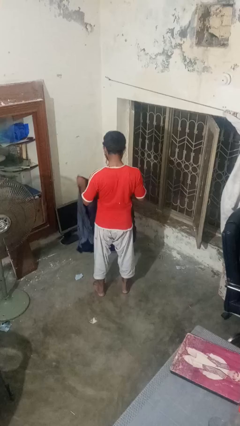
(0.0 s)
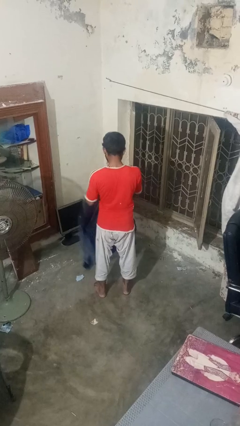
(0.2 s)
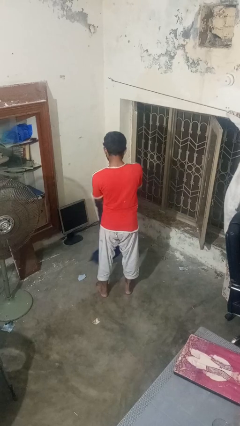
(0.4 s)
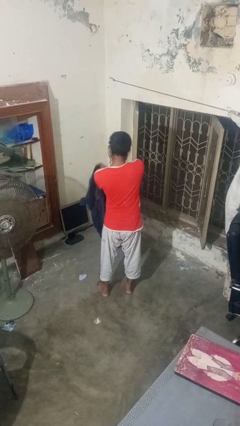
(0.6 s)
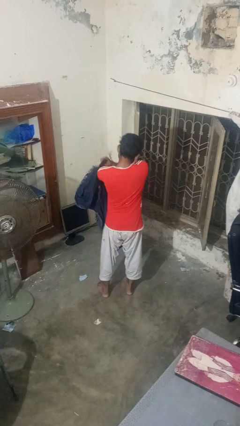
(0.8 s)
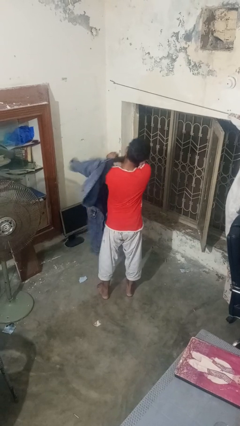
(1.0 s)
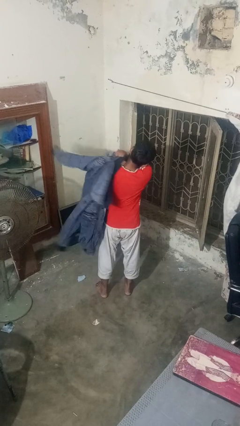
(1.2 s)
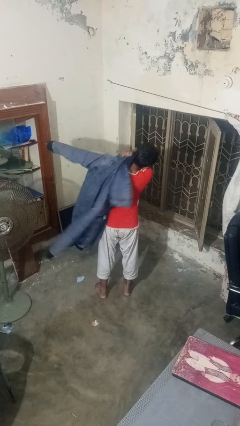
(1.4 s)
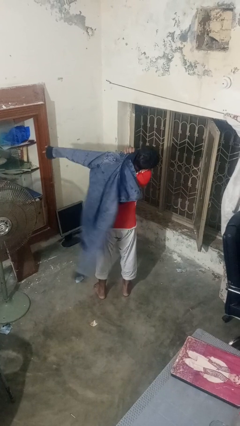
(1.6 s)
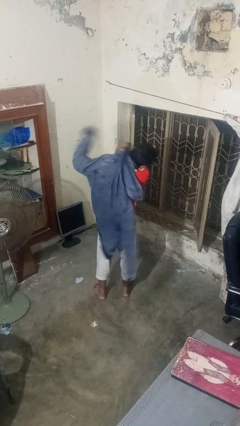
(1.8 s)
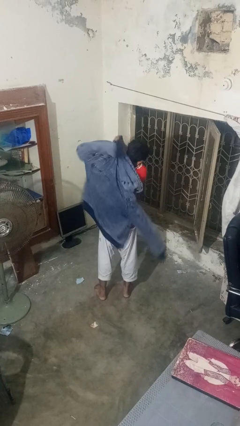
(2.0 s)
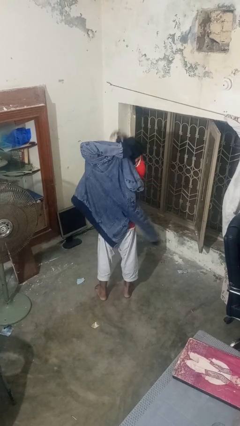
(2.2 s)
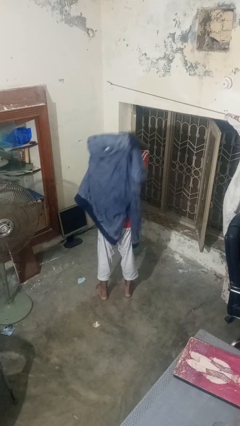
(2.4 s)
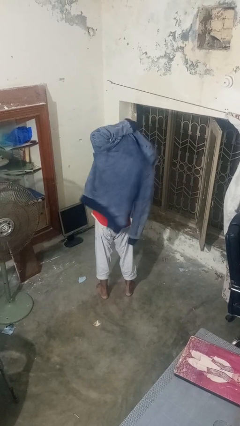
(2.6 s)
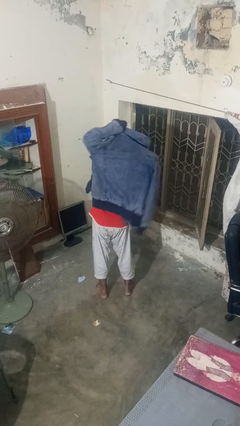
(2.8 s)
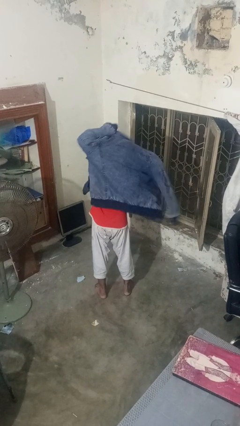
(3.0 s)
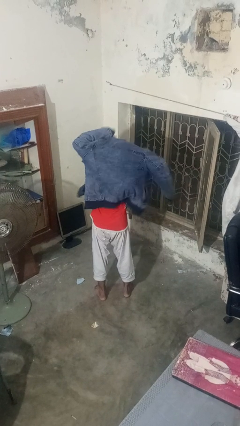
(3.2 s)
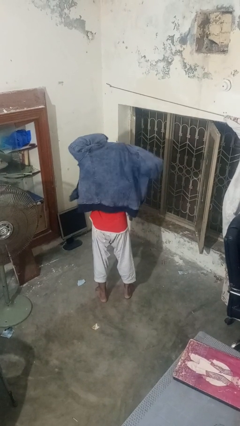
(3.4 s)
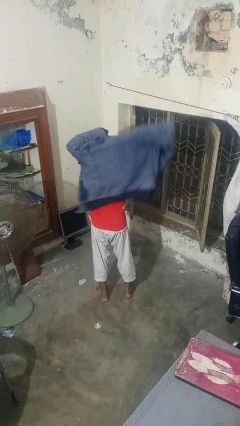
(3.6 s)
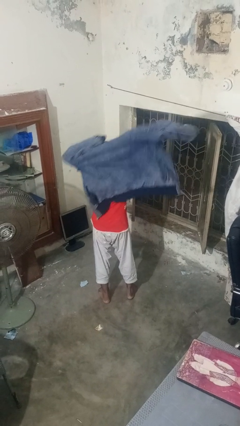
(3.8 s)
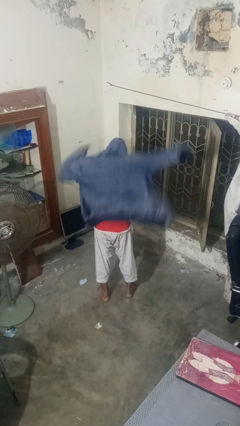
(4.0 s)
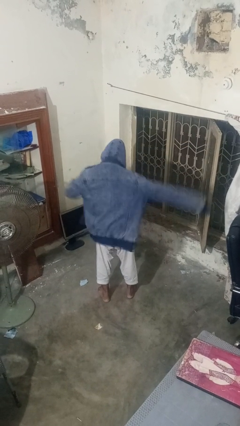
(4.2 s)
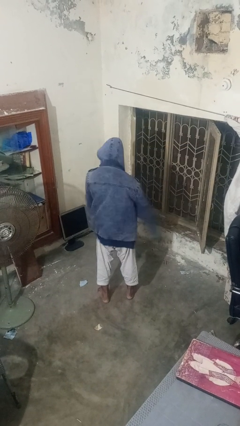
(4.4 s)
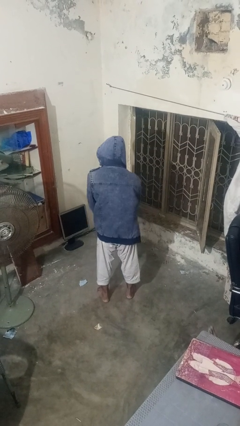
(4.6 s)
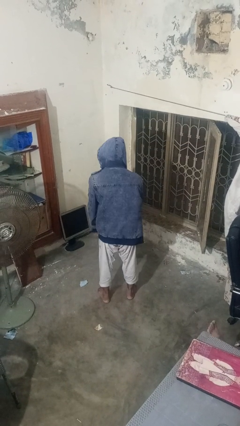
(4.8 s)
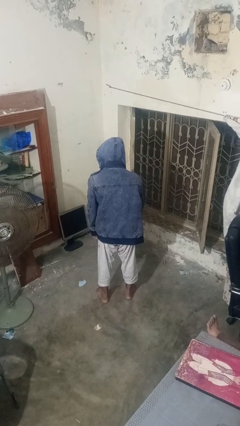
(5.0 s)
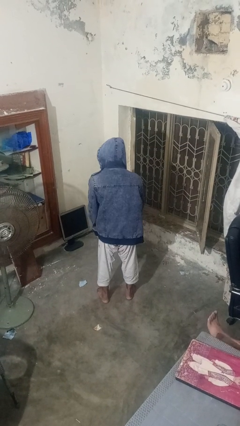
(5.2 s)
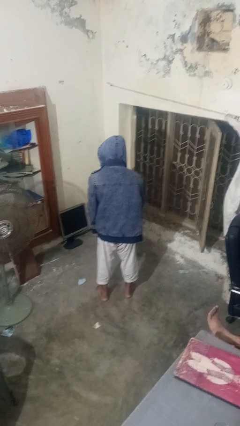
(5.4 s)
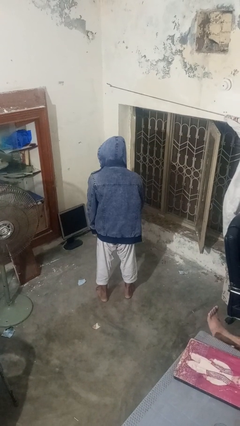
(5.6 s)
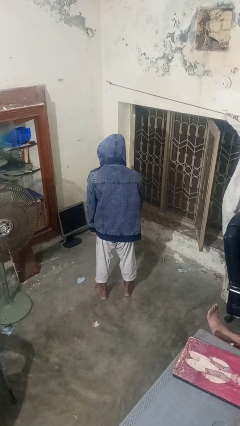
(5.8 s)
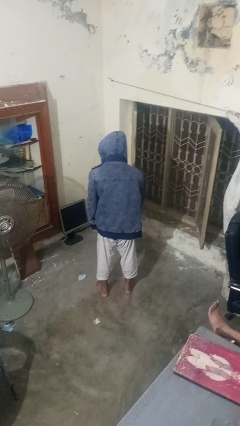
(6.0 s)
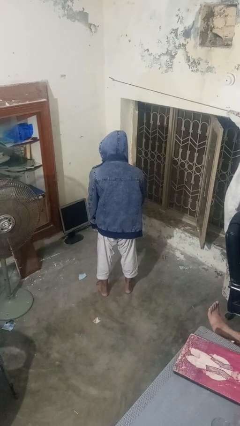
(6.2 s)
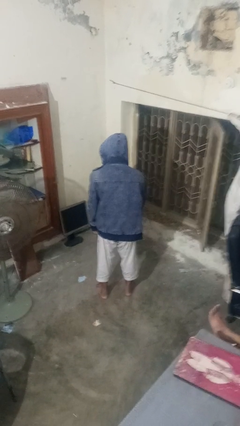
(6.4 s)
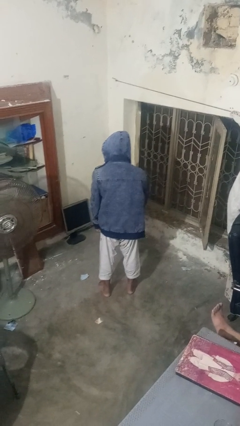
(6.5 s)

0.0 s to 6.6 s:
person puts on hoodie

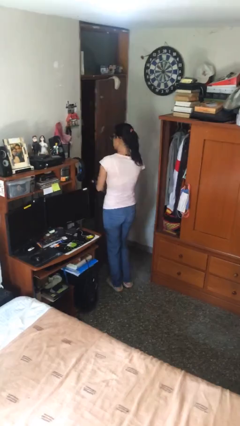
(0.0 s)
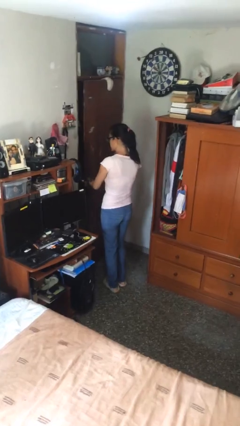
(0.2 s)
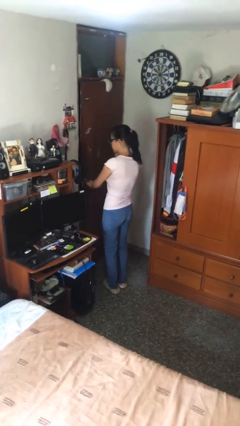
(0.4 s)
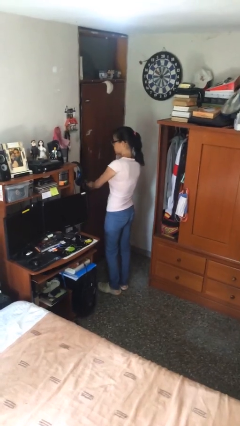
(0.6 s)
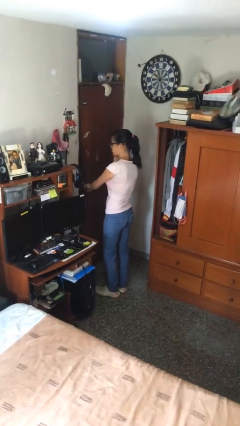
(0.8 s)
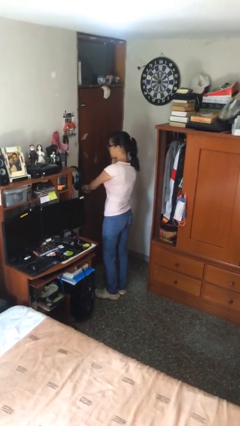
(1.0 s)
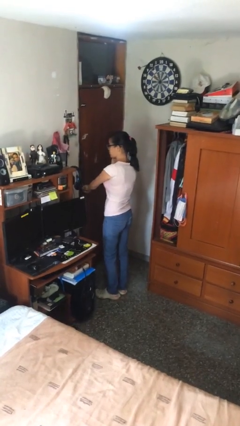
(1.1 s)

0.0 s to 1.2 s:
person closes facility door

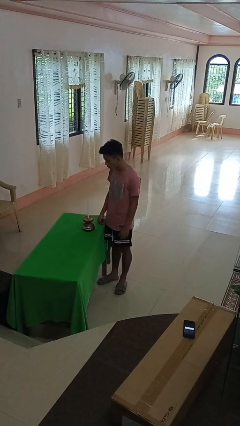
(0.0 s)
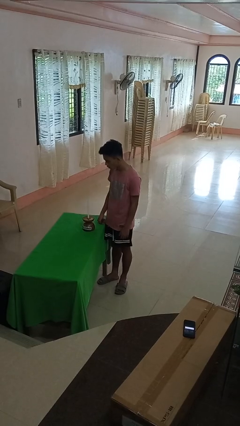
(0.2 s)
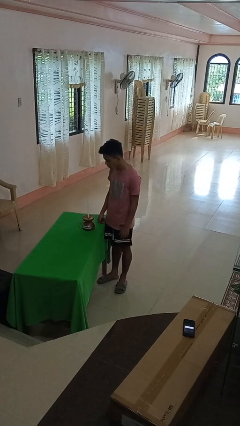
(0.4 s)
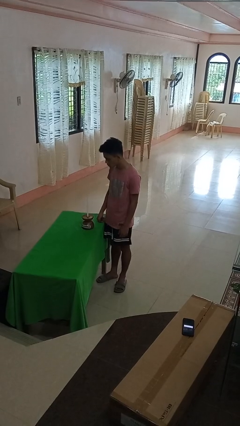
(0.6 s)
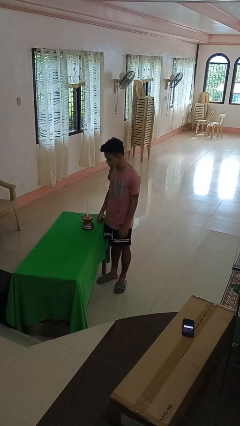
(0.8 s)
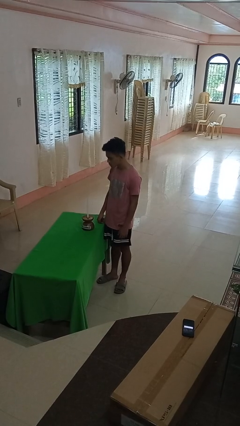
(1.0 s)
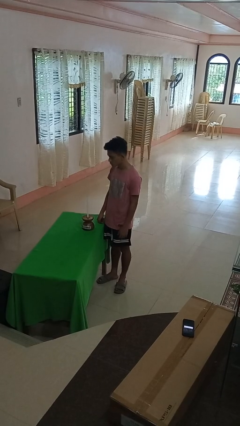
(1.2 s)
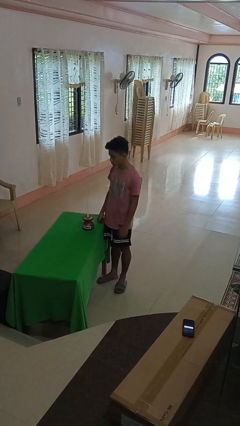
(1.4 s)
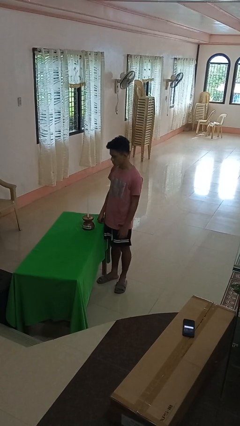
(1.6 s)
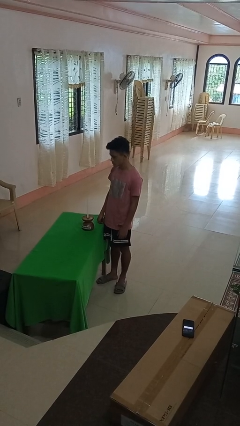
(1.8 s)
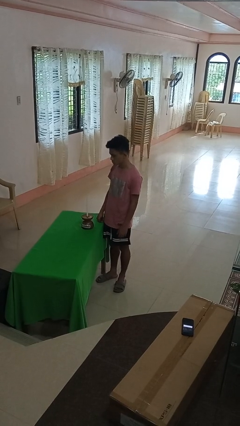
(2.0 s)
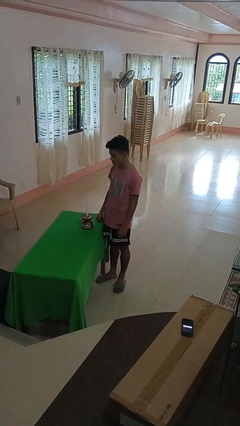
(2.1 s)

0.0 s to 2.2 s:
person extinguishes candle

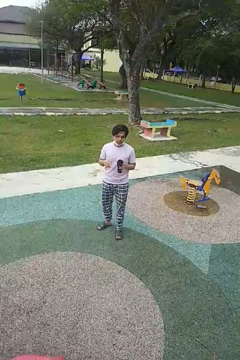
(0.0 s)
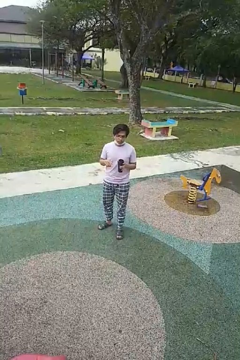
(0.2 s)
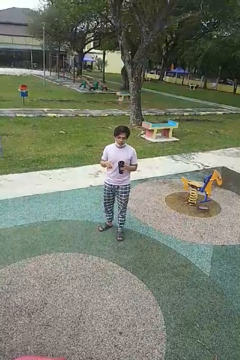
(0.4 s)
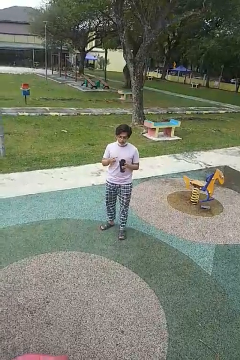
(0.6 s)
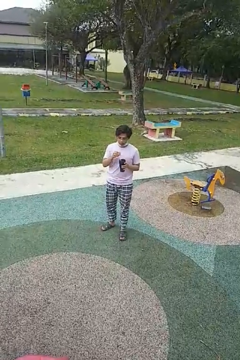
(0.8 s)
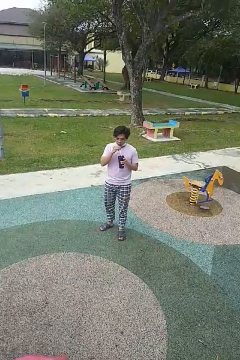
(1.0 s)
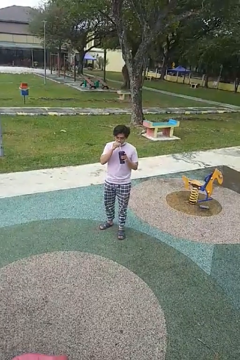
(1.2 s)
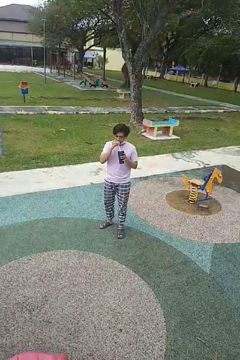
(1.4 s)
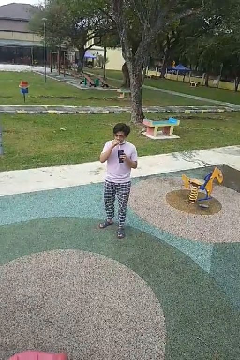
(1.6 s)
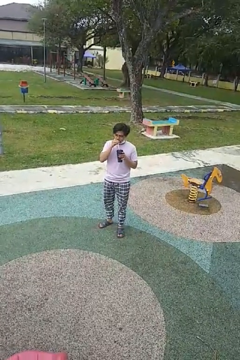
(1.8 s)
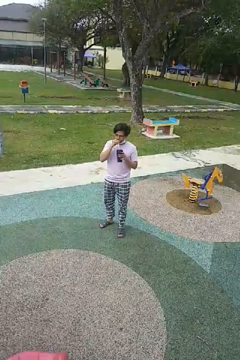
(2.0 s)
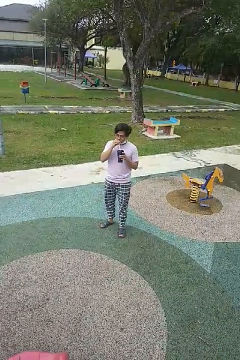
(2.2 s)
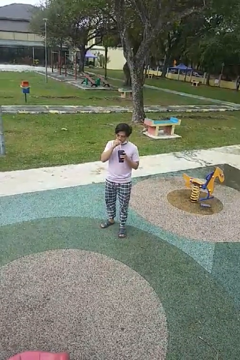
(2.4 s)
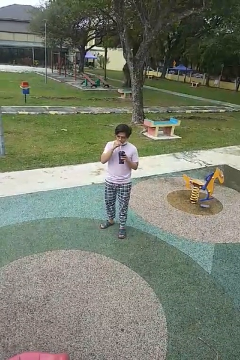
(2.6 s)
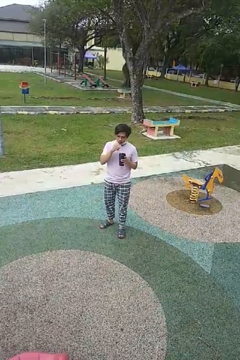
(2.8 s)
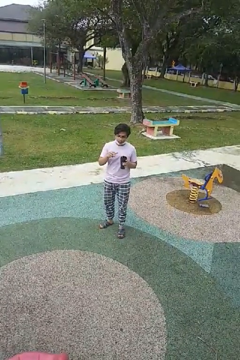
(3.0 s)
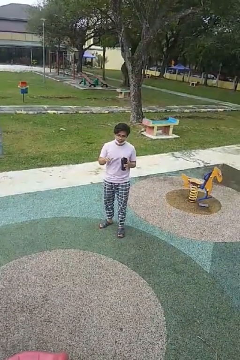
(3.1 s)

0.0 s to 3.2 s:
person drinks from straw

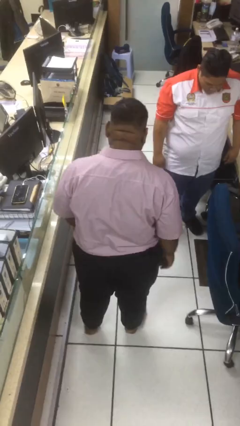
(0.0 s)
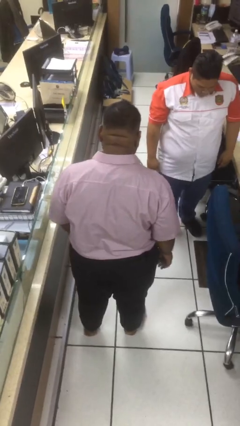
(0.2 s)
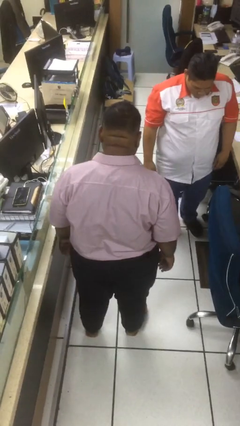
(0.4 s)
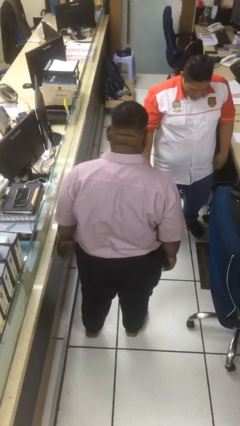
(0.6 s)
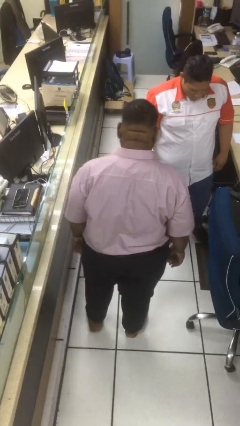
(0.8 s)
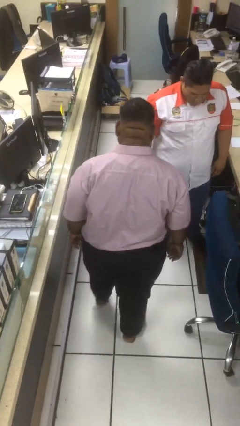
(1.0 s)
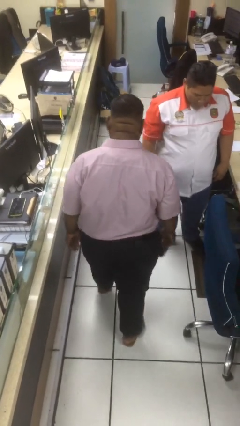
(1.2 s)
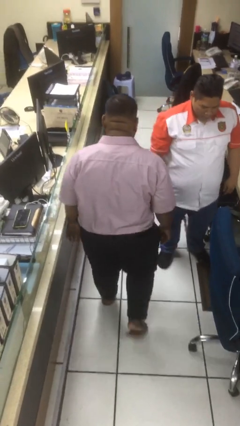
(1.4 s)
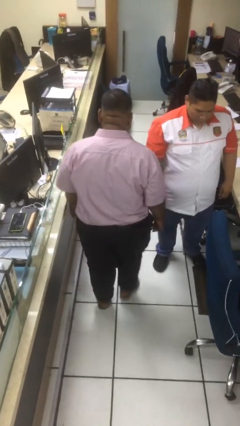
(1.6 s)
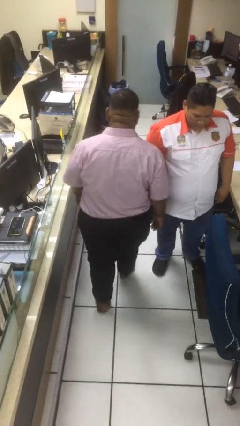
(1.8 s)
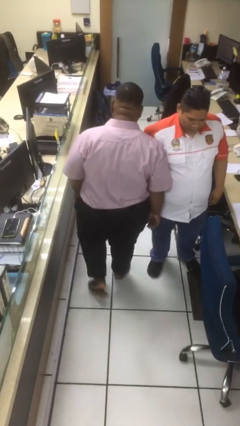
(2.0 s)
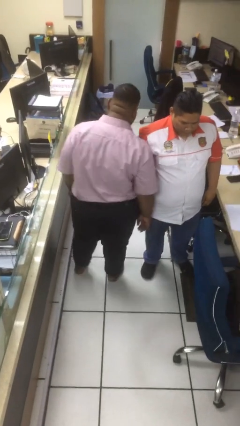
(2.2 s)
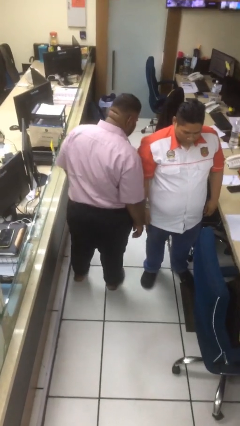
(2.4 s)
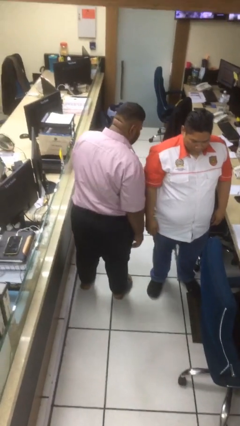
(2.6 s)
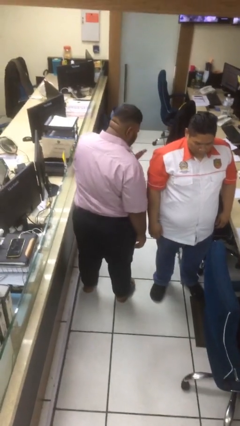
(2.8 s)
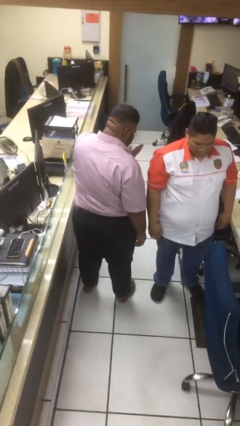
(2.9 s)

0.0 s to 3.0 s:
person bumps into person

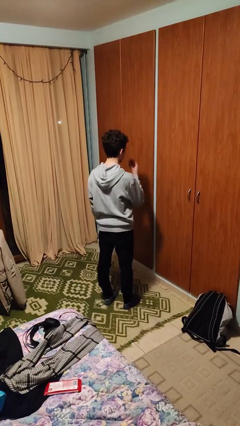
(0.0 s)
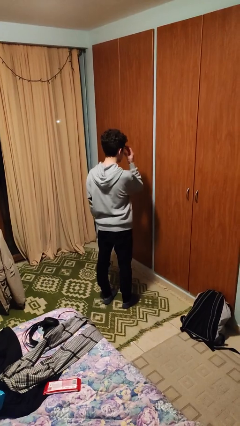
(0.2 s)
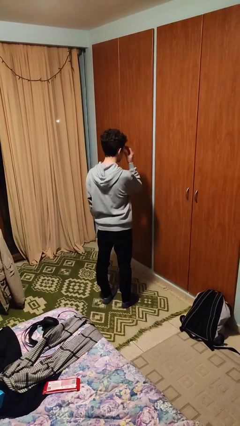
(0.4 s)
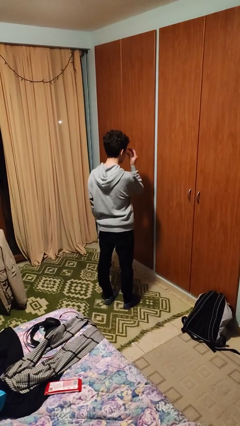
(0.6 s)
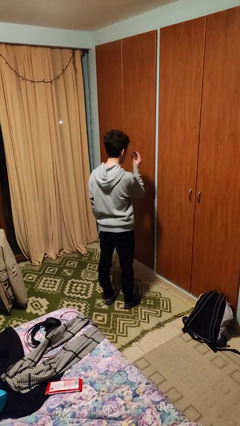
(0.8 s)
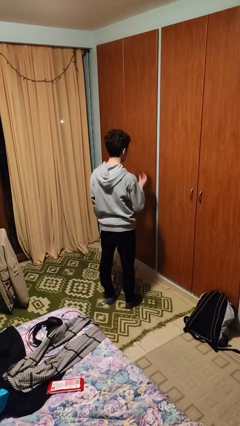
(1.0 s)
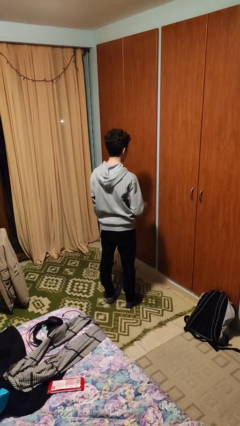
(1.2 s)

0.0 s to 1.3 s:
person takes off glasses

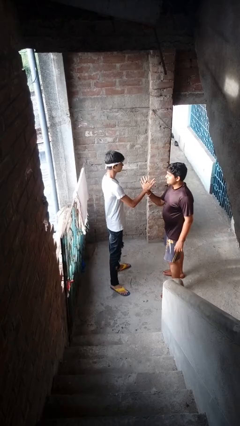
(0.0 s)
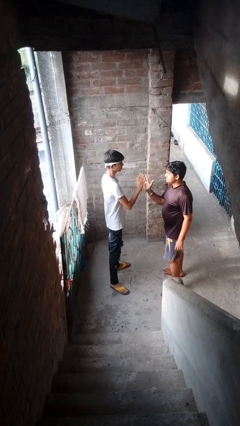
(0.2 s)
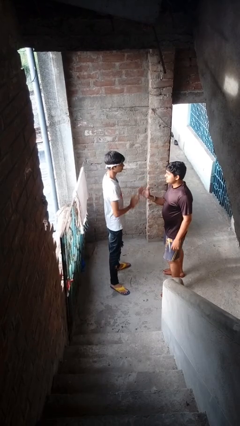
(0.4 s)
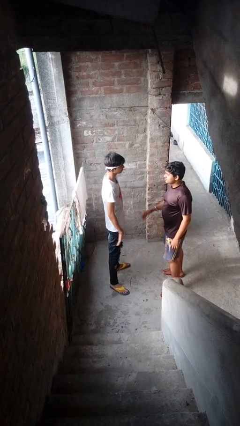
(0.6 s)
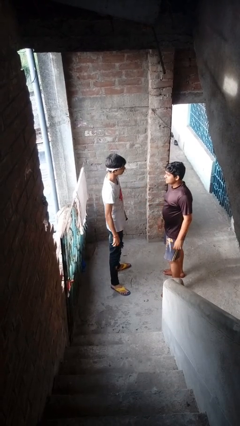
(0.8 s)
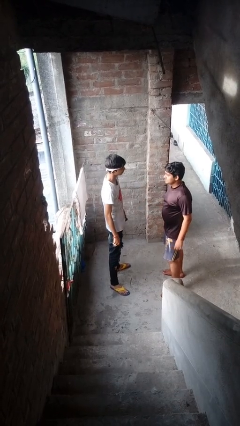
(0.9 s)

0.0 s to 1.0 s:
person highfives hand
